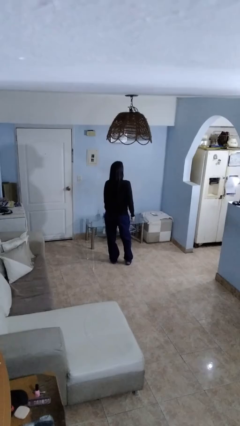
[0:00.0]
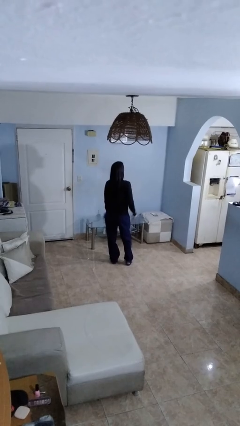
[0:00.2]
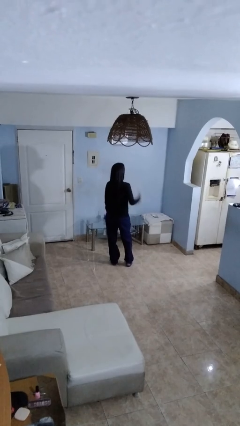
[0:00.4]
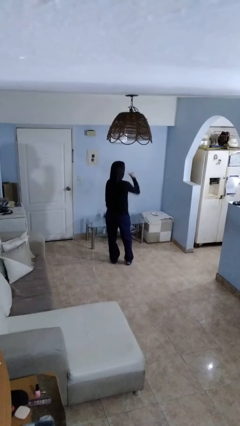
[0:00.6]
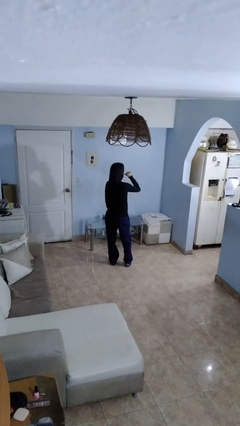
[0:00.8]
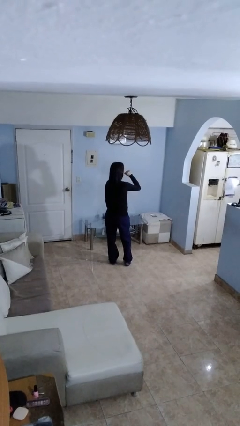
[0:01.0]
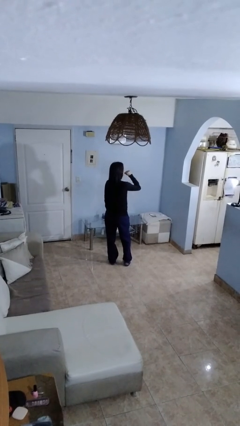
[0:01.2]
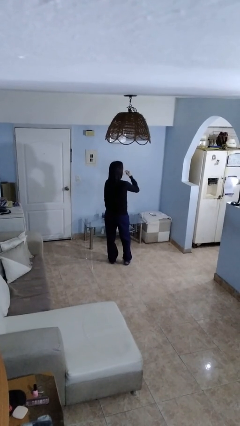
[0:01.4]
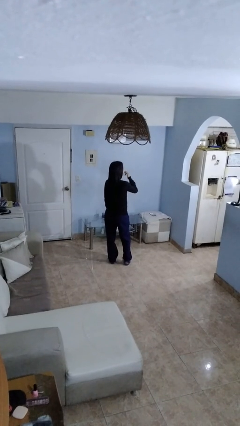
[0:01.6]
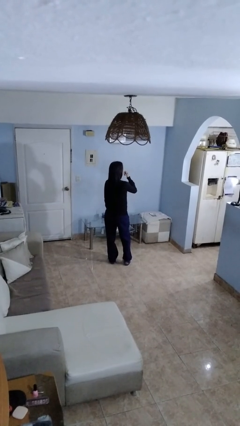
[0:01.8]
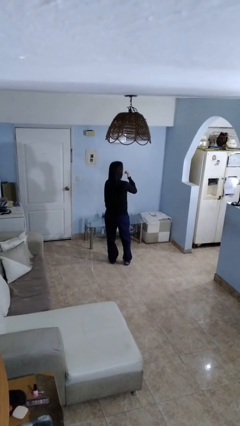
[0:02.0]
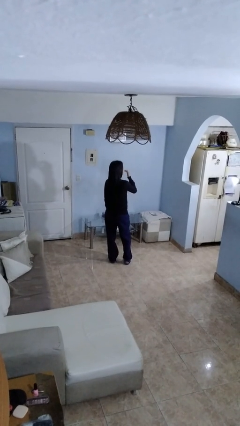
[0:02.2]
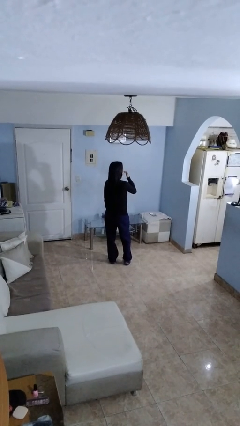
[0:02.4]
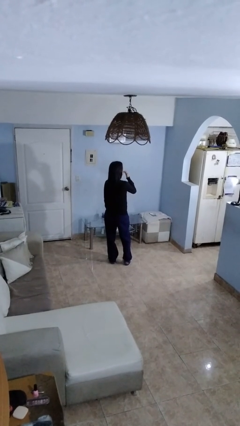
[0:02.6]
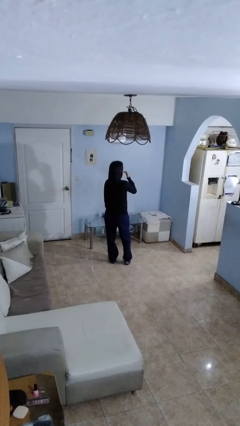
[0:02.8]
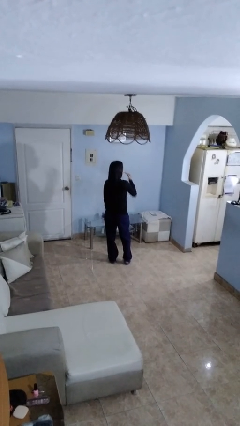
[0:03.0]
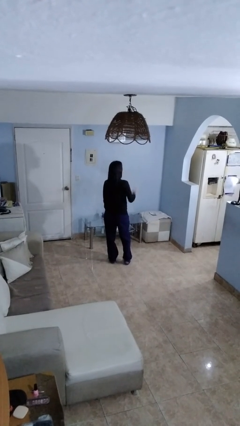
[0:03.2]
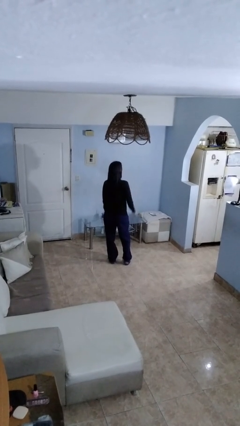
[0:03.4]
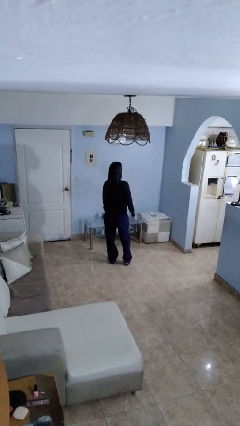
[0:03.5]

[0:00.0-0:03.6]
person licks fingers

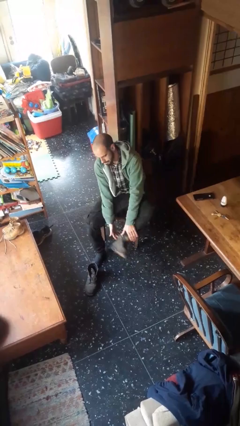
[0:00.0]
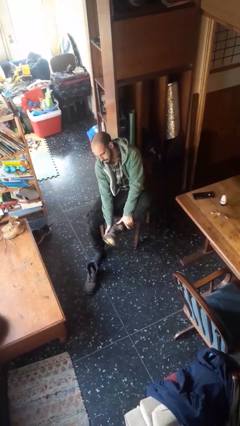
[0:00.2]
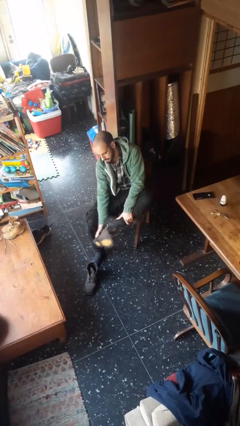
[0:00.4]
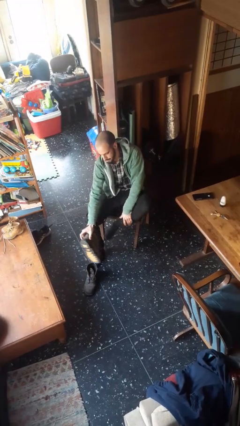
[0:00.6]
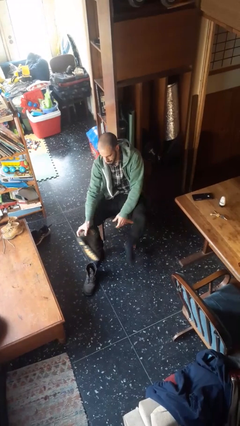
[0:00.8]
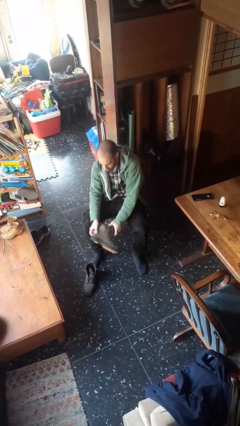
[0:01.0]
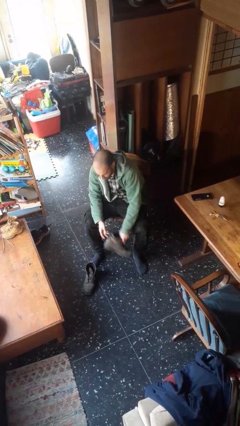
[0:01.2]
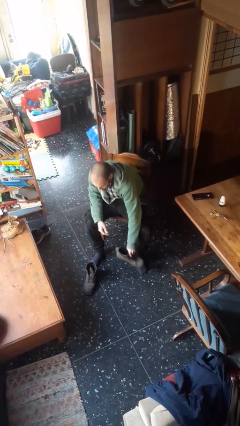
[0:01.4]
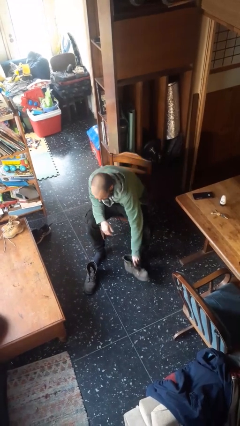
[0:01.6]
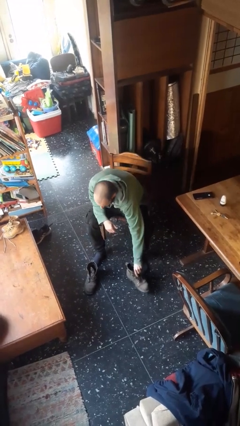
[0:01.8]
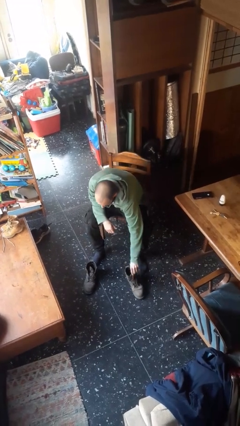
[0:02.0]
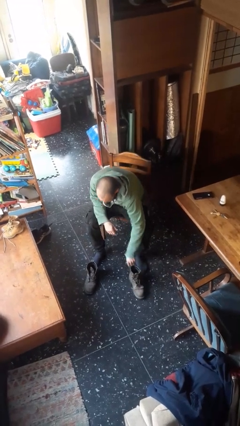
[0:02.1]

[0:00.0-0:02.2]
person takes off boots

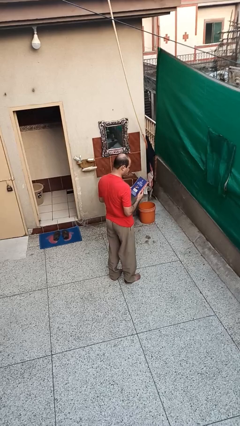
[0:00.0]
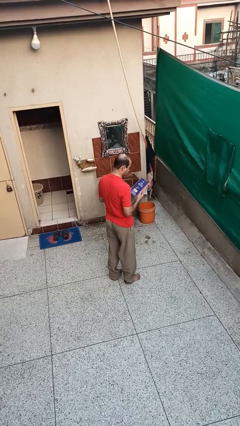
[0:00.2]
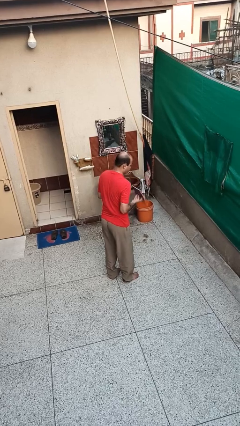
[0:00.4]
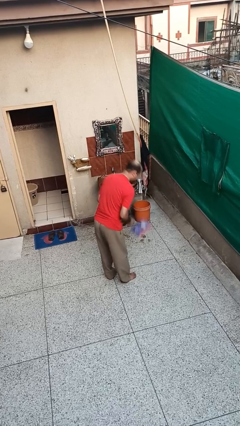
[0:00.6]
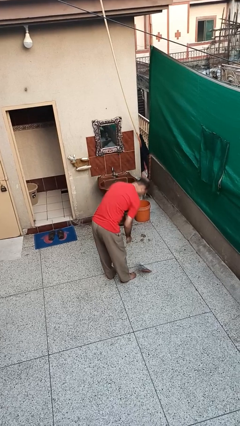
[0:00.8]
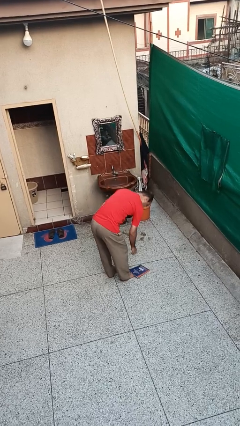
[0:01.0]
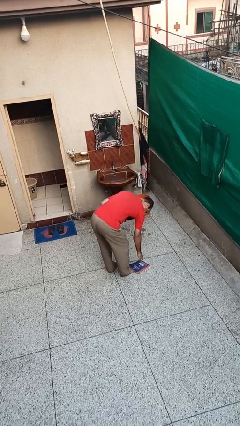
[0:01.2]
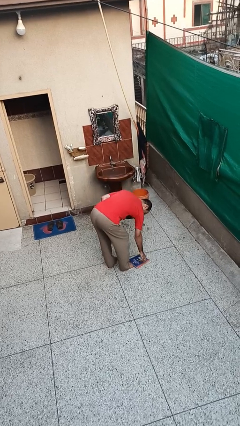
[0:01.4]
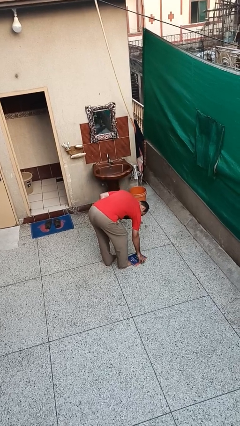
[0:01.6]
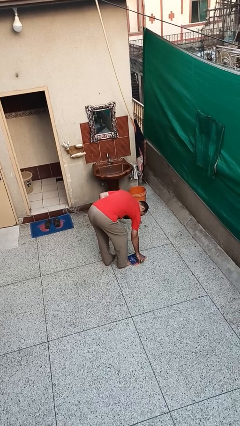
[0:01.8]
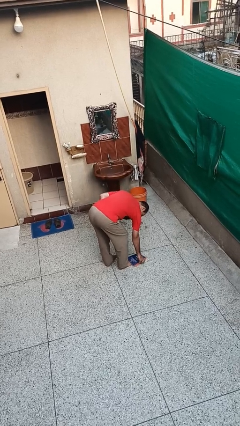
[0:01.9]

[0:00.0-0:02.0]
person drops object

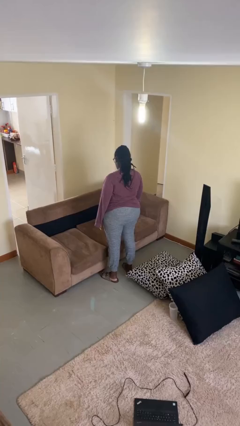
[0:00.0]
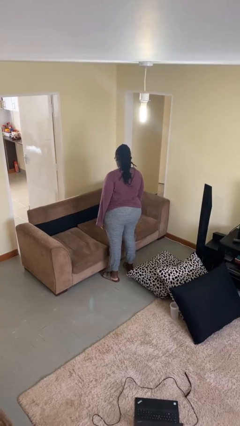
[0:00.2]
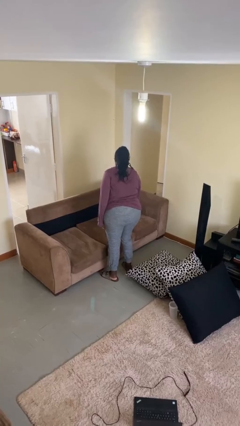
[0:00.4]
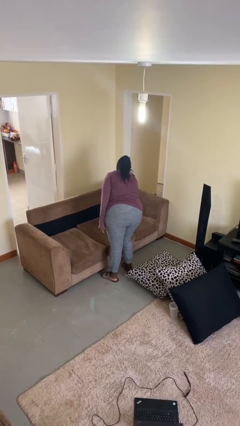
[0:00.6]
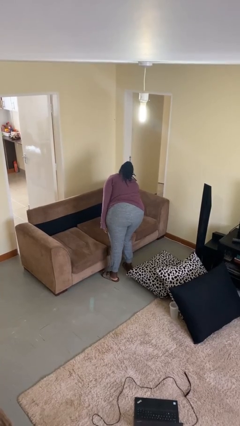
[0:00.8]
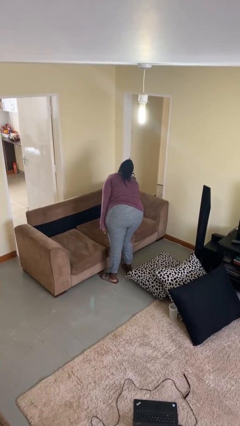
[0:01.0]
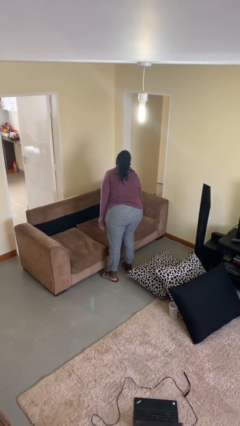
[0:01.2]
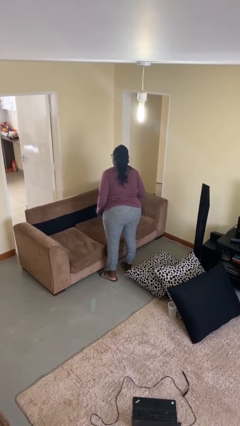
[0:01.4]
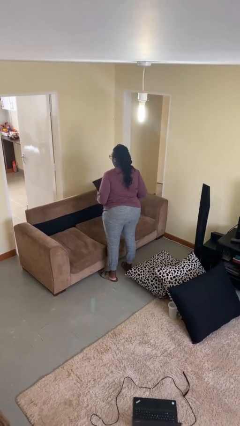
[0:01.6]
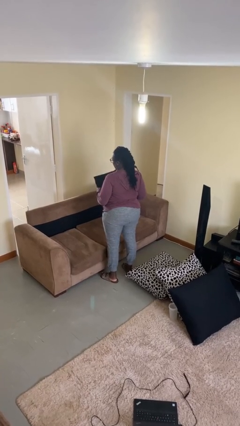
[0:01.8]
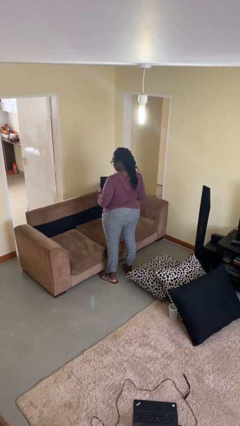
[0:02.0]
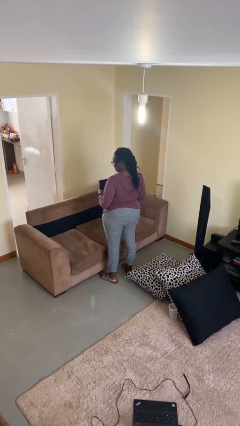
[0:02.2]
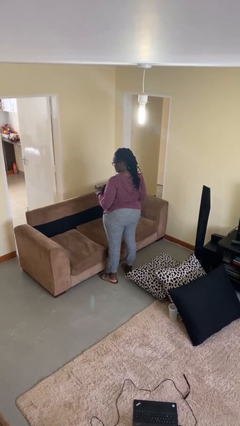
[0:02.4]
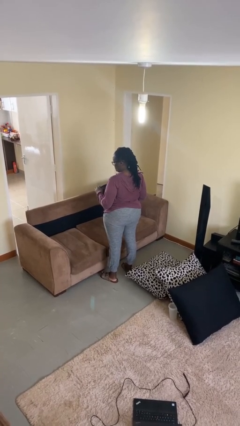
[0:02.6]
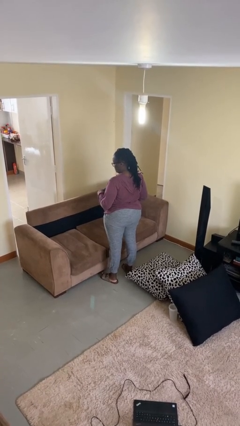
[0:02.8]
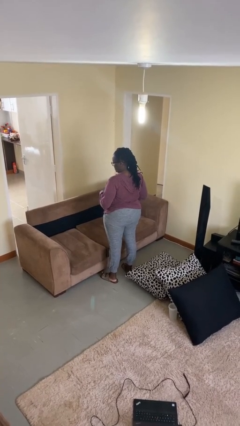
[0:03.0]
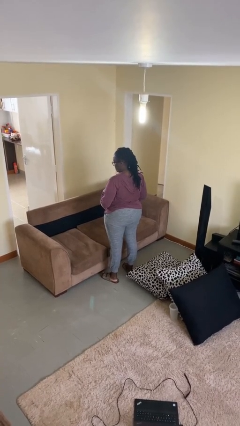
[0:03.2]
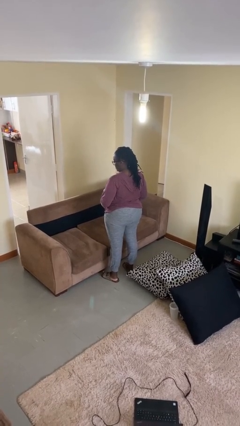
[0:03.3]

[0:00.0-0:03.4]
person picks up object from couch

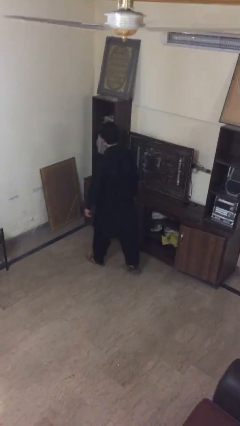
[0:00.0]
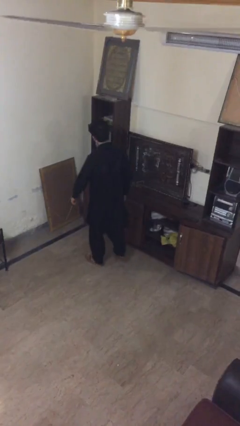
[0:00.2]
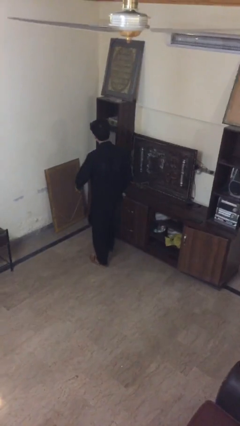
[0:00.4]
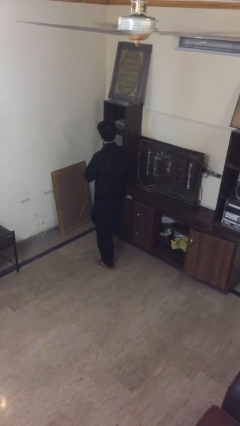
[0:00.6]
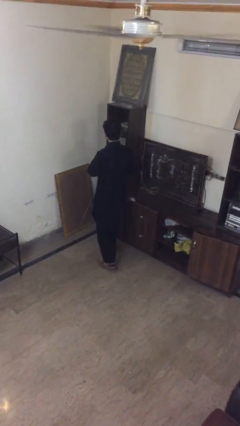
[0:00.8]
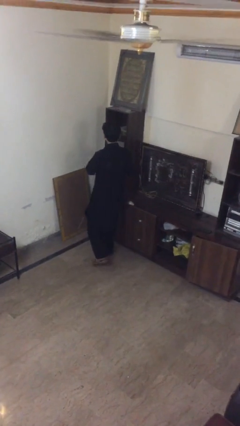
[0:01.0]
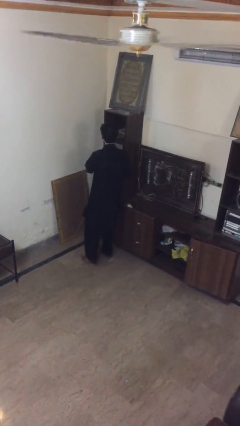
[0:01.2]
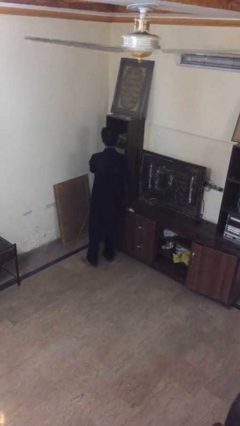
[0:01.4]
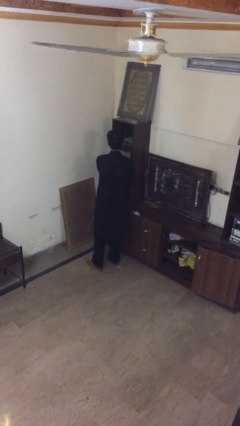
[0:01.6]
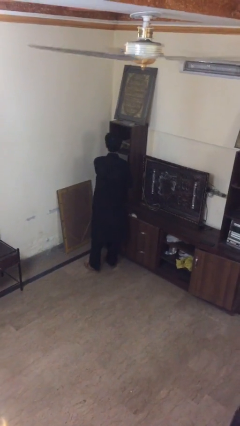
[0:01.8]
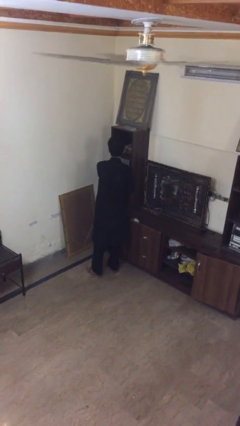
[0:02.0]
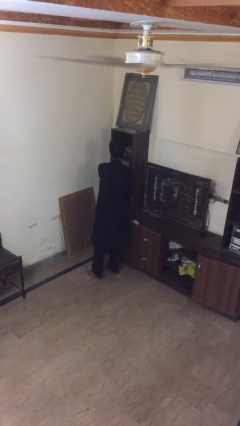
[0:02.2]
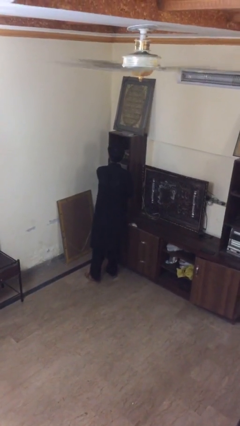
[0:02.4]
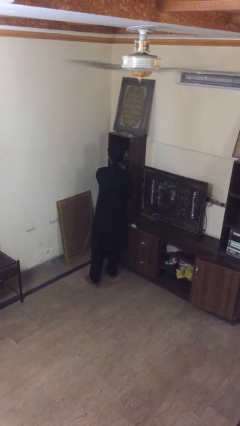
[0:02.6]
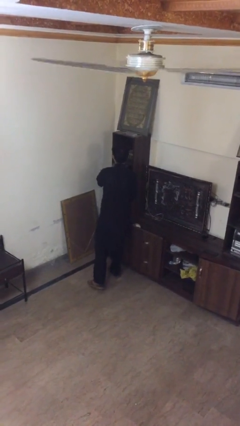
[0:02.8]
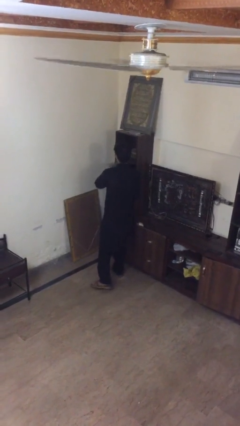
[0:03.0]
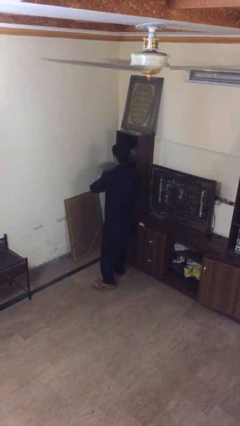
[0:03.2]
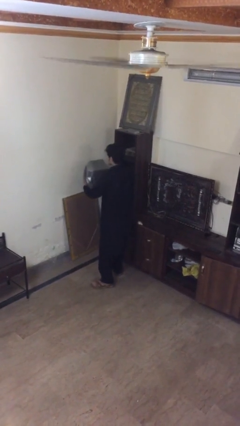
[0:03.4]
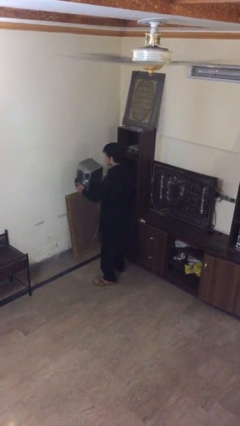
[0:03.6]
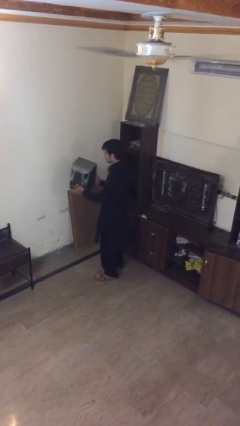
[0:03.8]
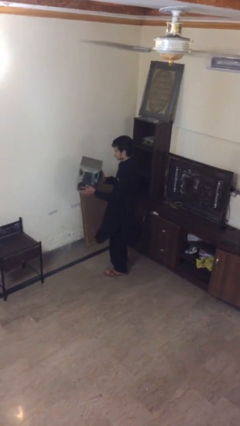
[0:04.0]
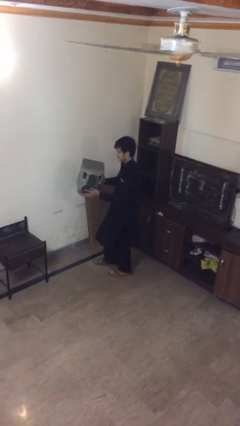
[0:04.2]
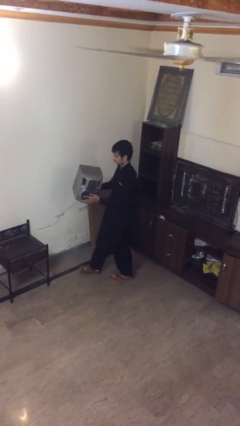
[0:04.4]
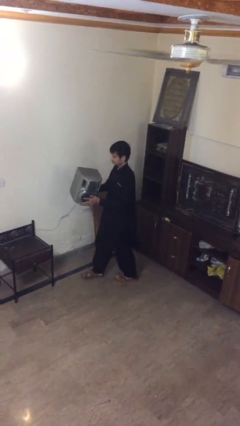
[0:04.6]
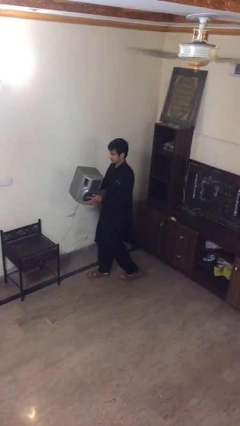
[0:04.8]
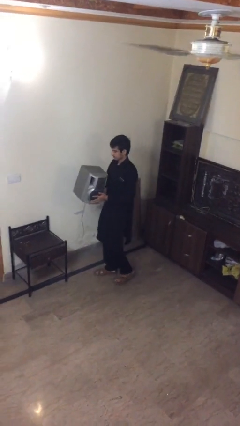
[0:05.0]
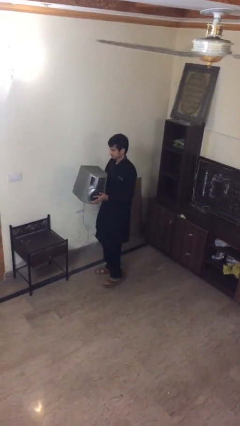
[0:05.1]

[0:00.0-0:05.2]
person picks up object from shelf

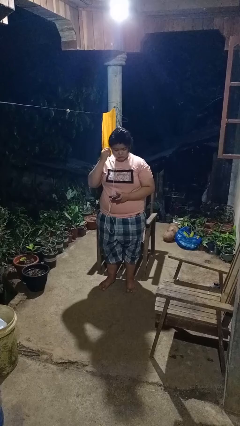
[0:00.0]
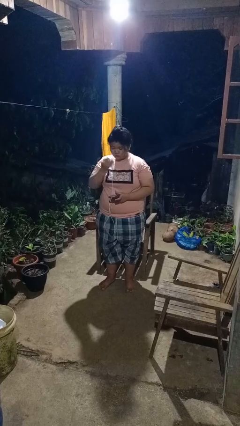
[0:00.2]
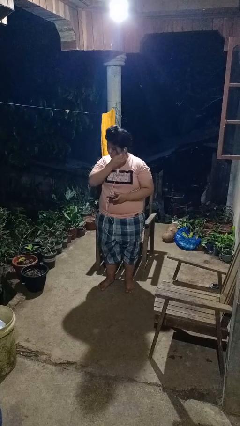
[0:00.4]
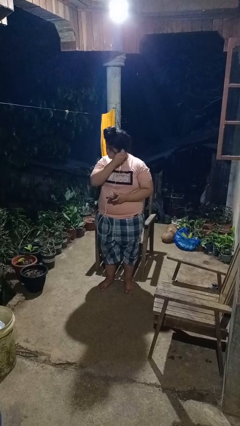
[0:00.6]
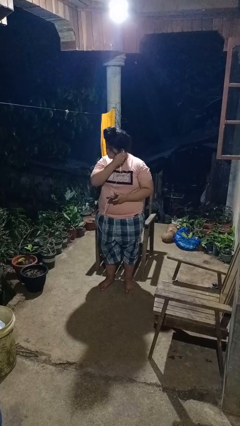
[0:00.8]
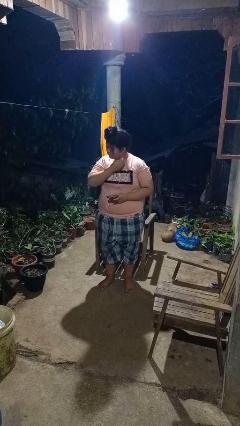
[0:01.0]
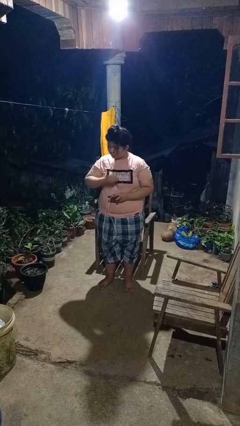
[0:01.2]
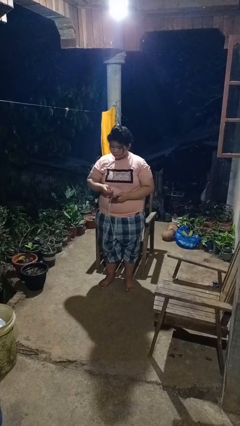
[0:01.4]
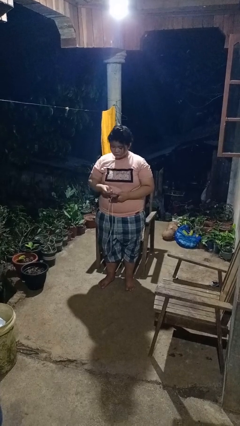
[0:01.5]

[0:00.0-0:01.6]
person takes off headphones
